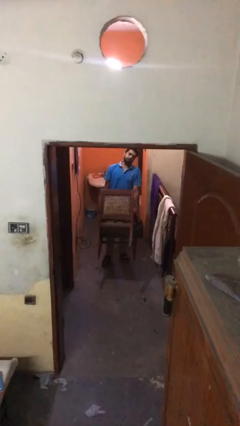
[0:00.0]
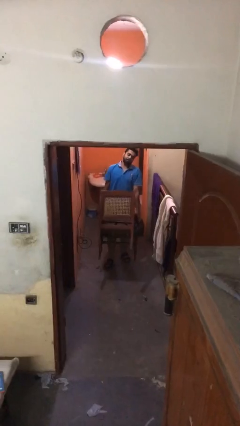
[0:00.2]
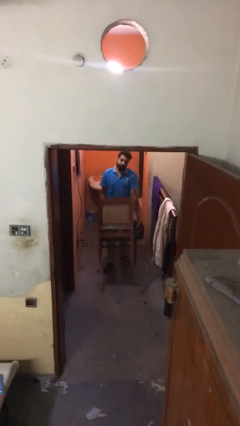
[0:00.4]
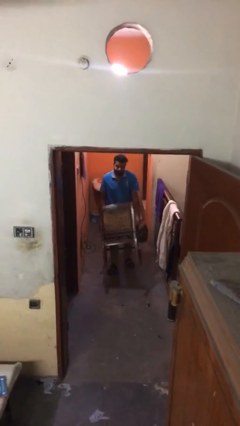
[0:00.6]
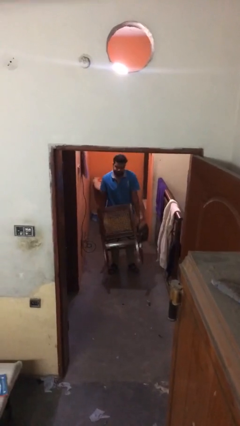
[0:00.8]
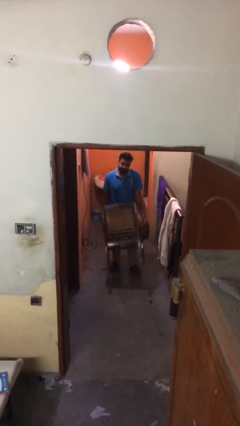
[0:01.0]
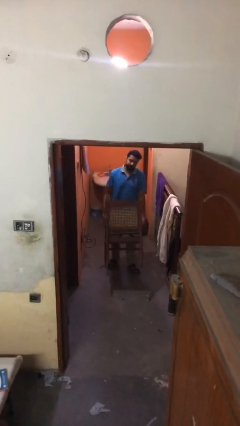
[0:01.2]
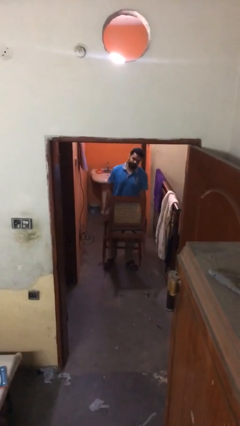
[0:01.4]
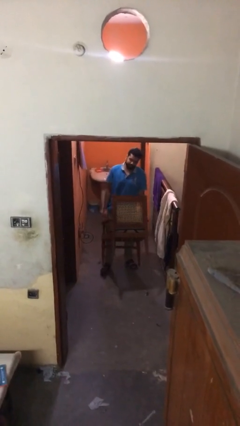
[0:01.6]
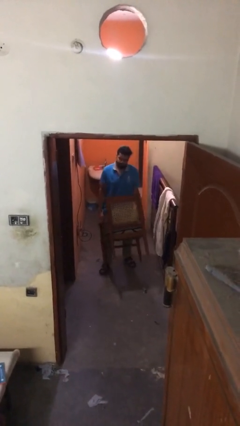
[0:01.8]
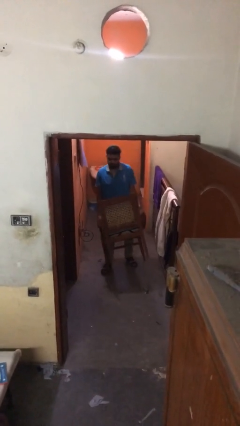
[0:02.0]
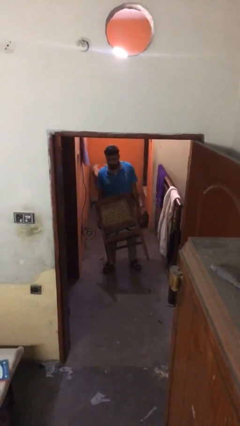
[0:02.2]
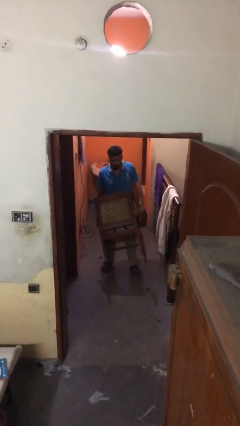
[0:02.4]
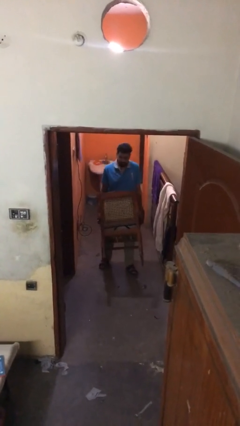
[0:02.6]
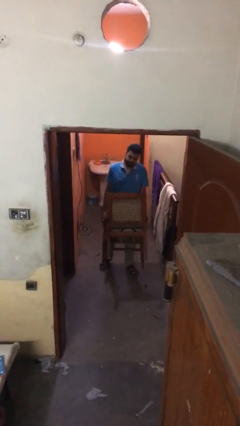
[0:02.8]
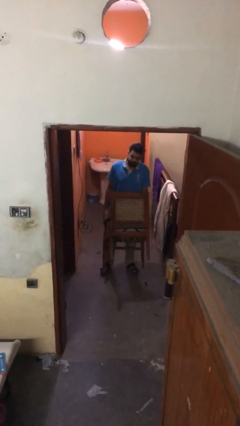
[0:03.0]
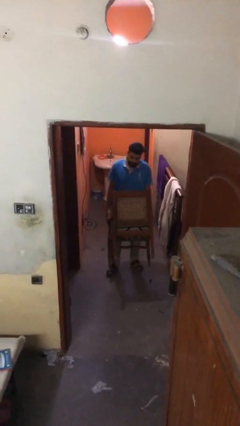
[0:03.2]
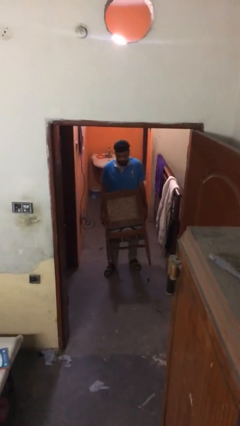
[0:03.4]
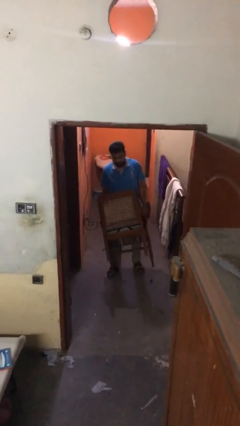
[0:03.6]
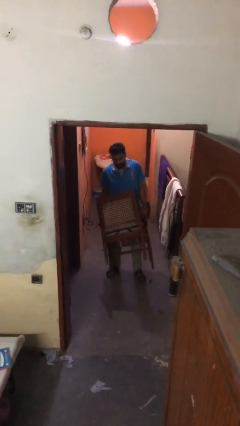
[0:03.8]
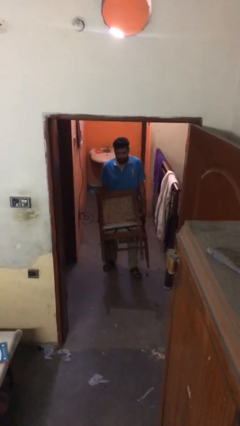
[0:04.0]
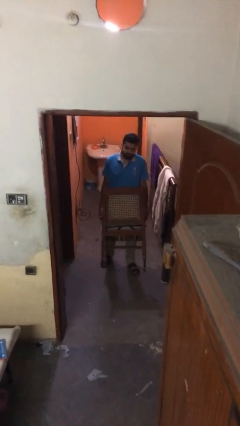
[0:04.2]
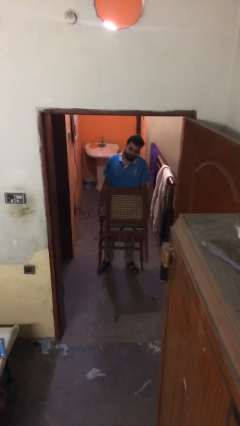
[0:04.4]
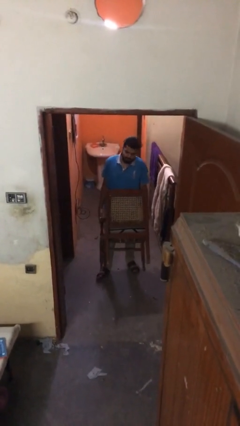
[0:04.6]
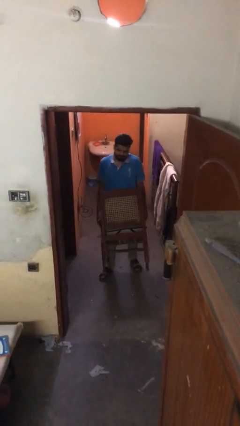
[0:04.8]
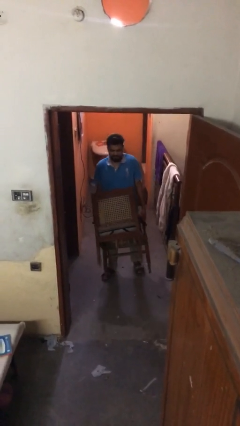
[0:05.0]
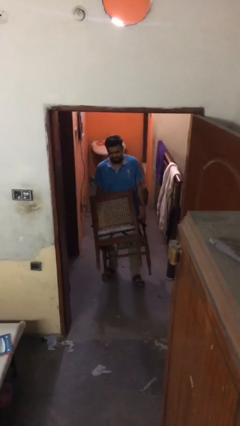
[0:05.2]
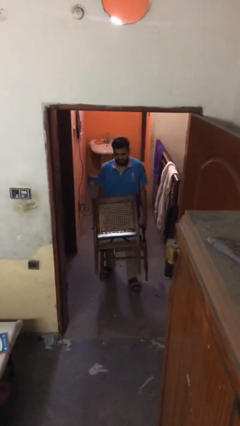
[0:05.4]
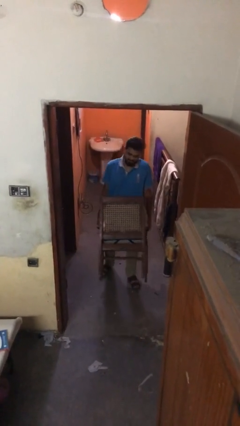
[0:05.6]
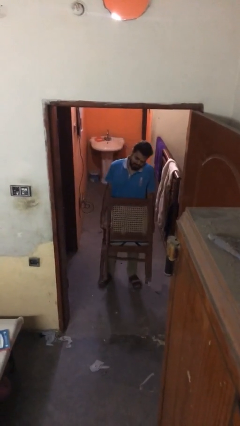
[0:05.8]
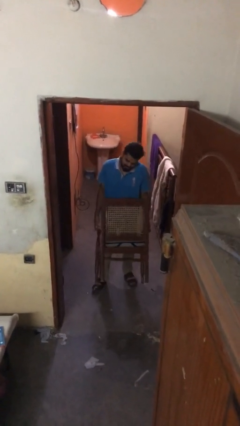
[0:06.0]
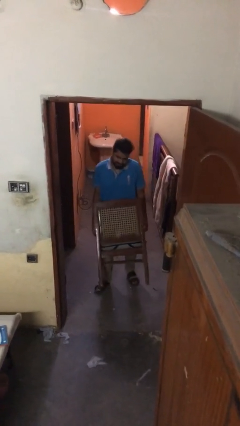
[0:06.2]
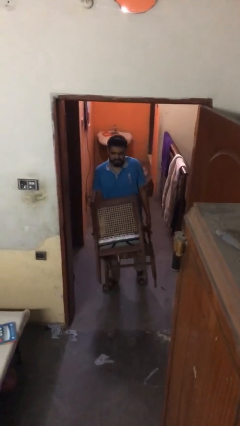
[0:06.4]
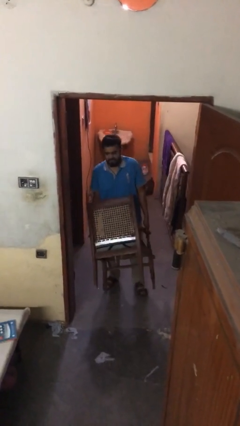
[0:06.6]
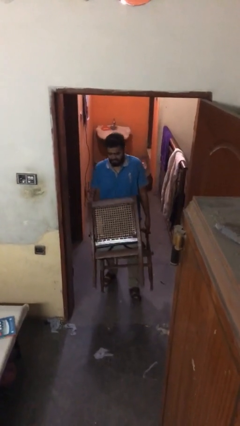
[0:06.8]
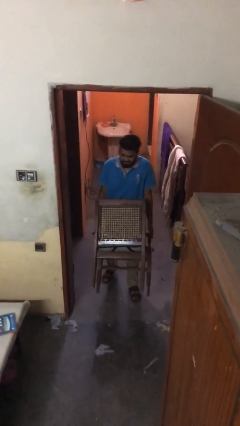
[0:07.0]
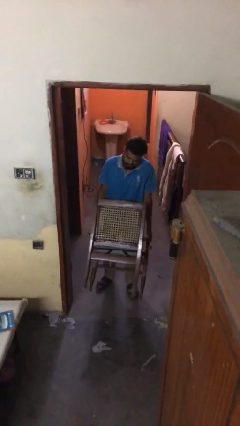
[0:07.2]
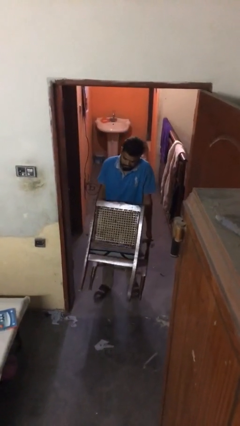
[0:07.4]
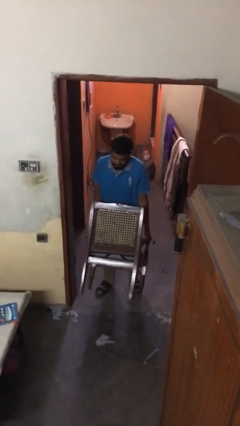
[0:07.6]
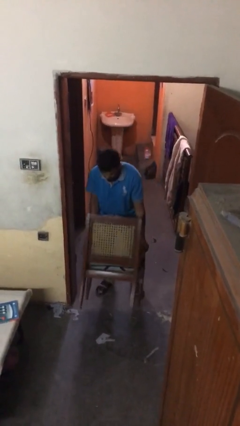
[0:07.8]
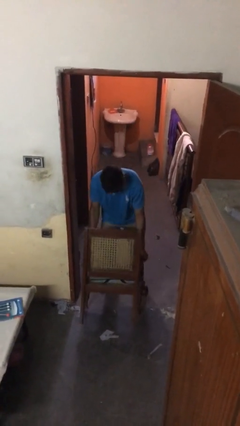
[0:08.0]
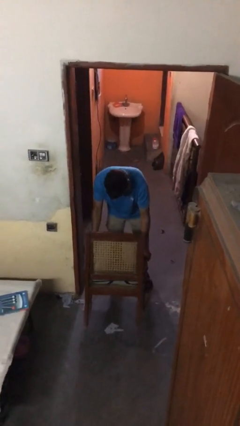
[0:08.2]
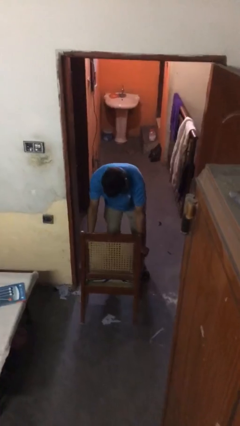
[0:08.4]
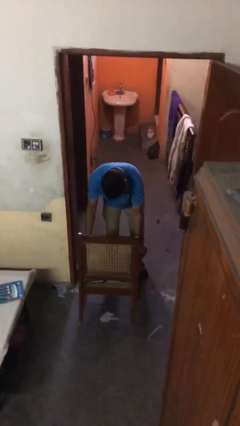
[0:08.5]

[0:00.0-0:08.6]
person carries heavy object

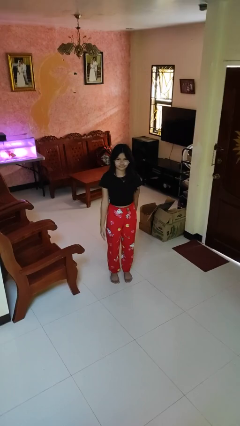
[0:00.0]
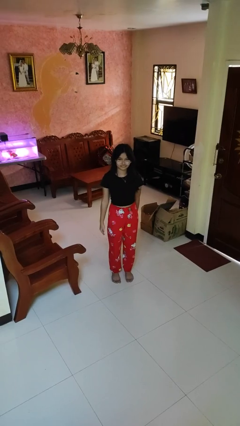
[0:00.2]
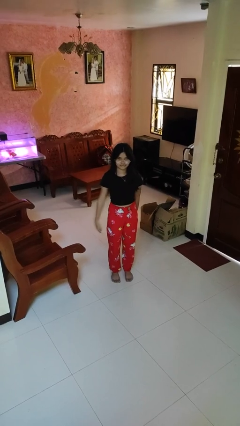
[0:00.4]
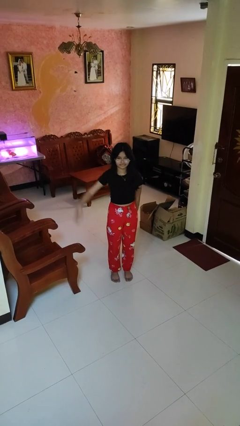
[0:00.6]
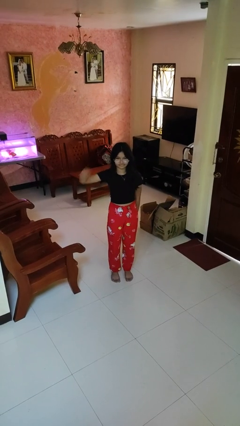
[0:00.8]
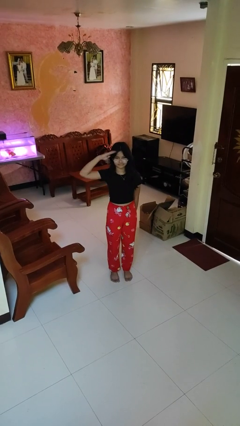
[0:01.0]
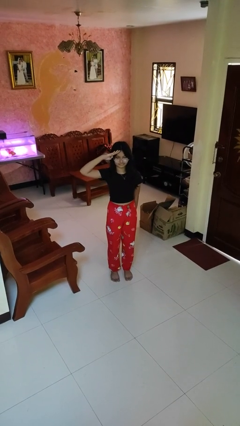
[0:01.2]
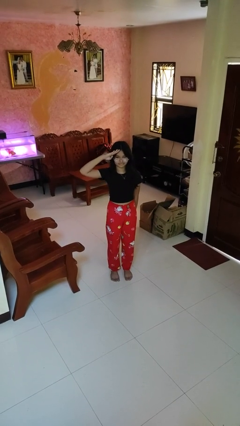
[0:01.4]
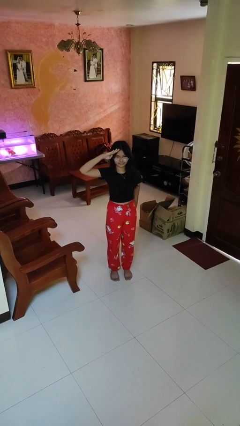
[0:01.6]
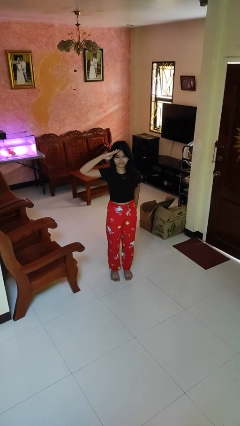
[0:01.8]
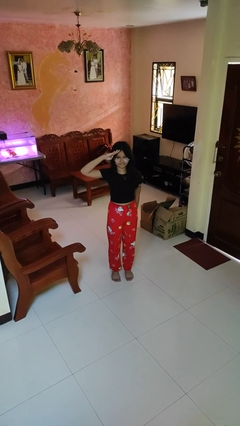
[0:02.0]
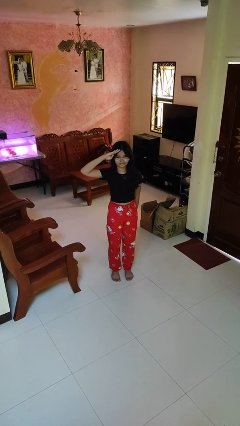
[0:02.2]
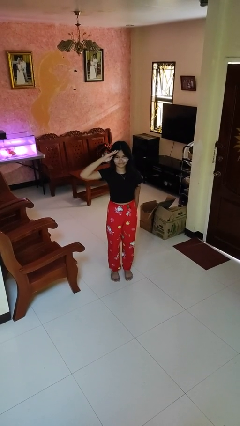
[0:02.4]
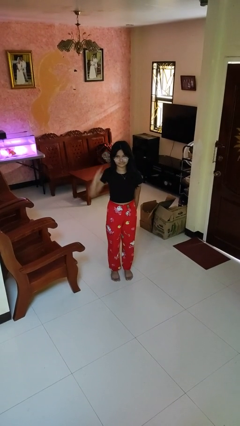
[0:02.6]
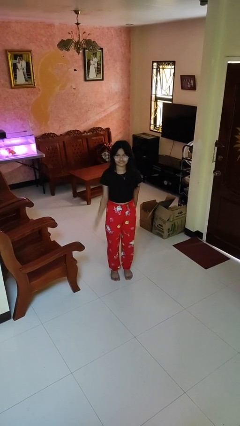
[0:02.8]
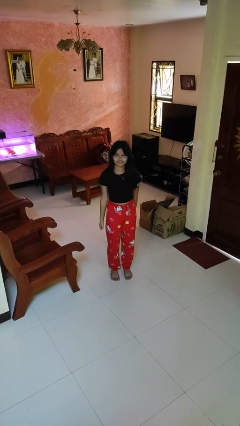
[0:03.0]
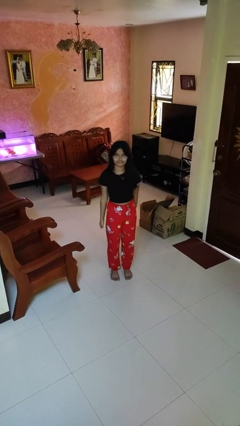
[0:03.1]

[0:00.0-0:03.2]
person salutes

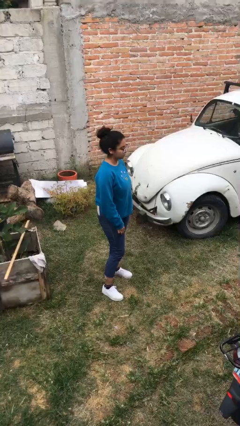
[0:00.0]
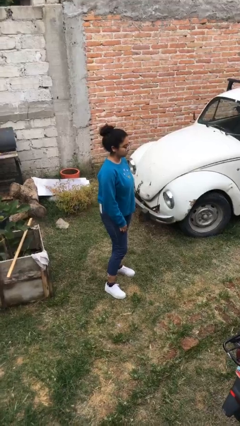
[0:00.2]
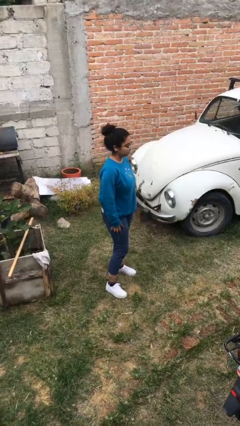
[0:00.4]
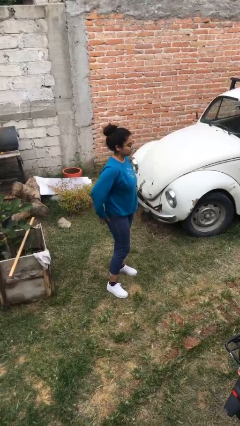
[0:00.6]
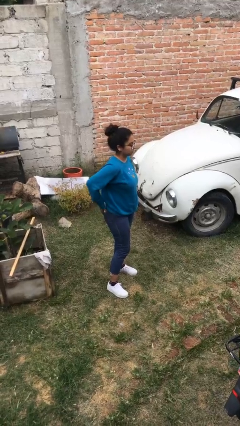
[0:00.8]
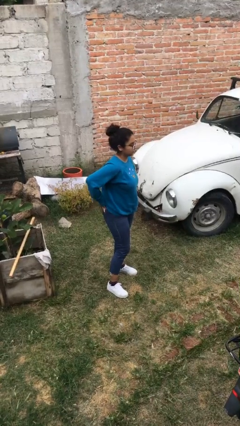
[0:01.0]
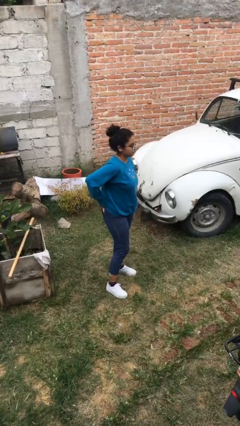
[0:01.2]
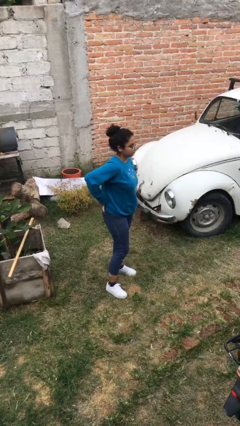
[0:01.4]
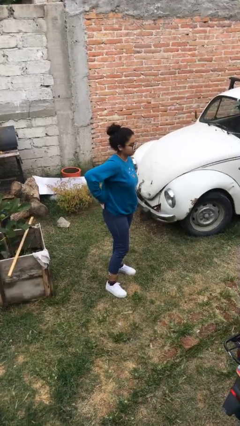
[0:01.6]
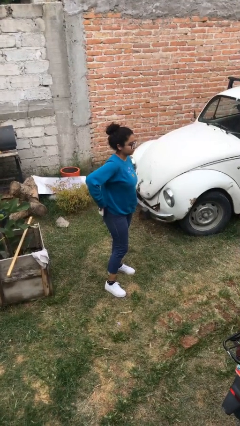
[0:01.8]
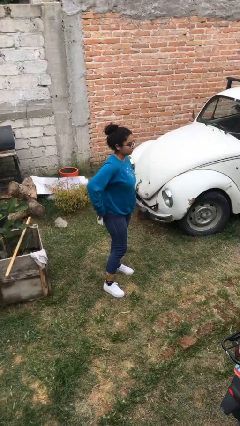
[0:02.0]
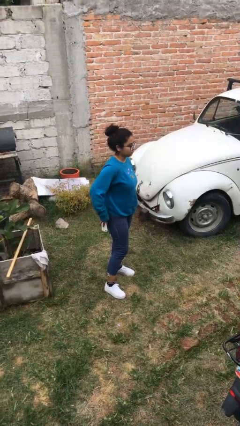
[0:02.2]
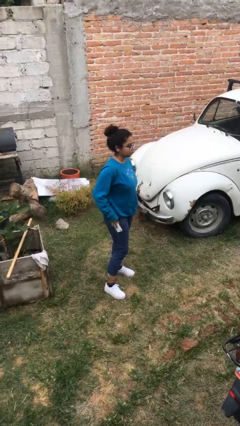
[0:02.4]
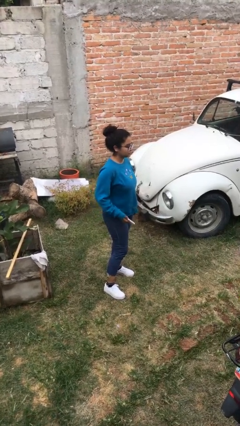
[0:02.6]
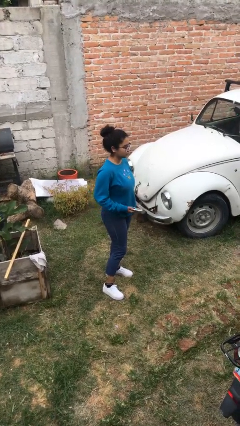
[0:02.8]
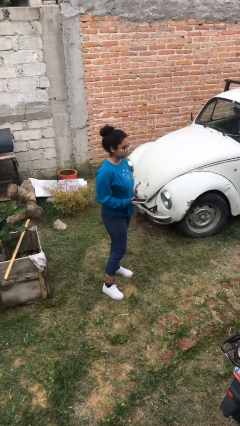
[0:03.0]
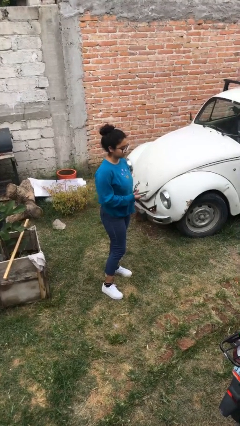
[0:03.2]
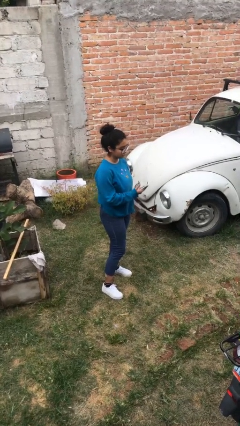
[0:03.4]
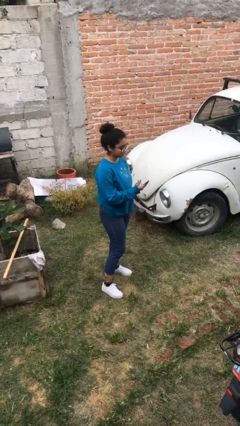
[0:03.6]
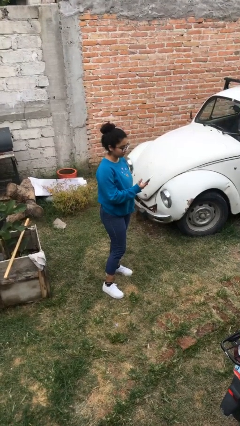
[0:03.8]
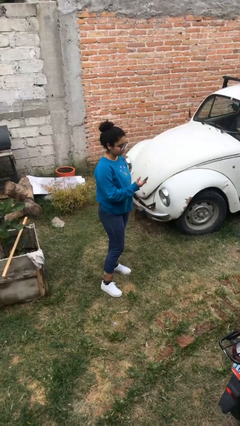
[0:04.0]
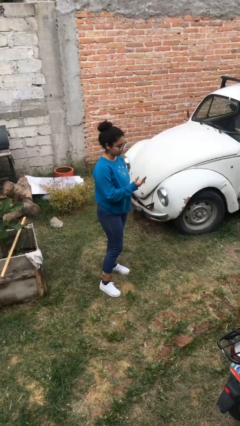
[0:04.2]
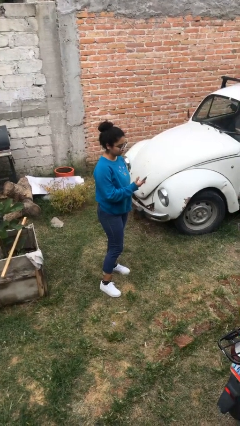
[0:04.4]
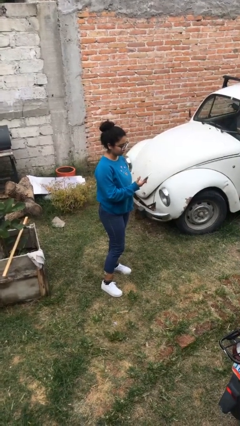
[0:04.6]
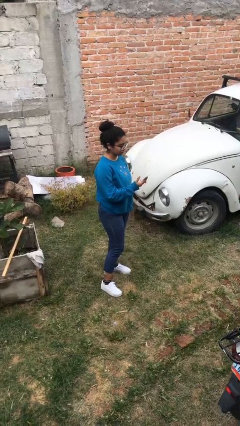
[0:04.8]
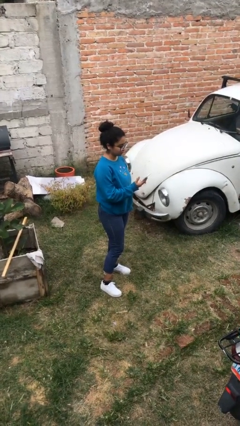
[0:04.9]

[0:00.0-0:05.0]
person takes phone from pocket

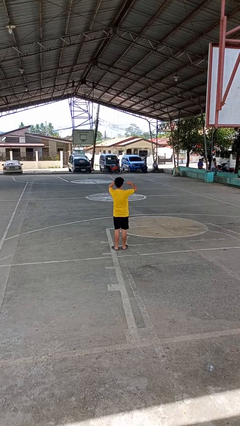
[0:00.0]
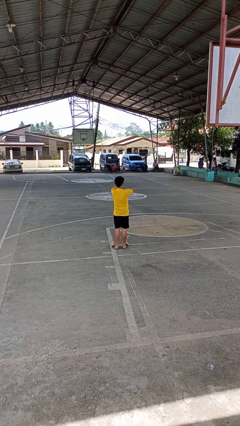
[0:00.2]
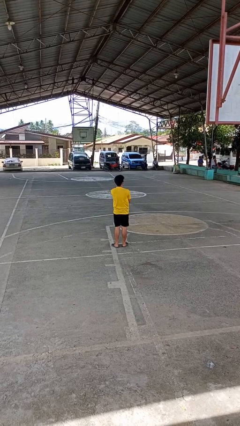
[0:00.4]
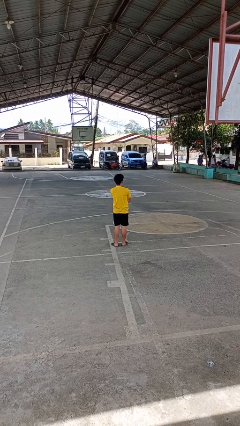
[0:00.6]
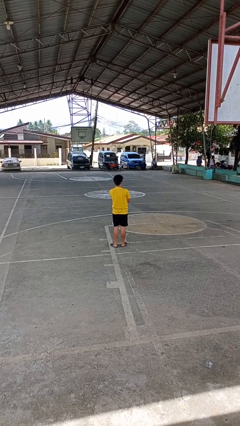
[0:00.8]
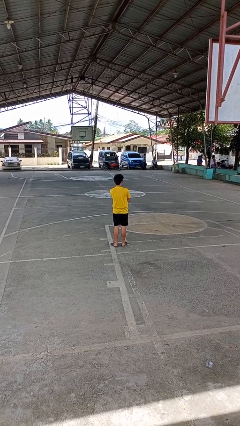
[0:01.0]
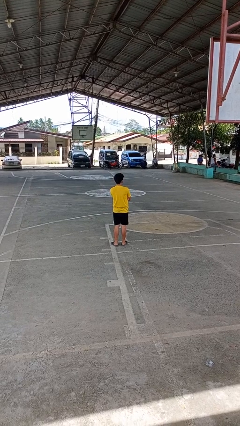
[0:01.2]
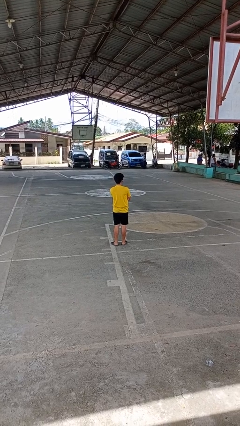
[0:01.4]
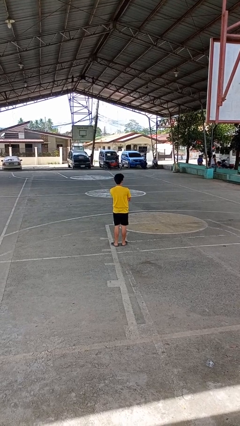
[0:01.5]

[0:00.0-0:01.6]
person crosses arms
